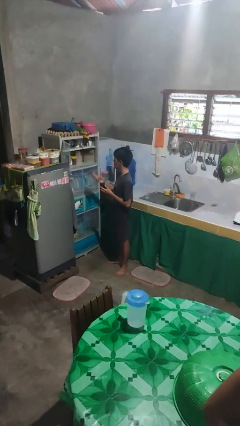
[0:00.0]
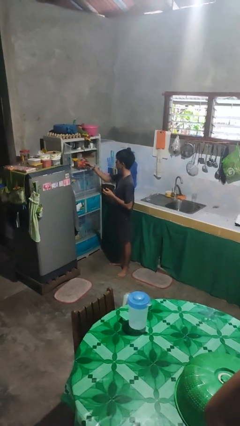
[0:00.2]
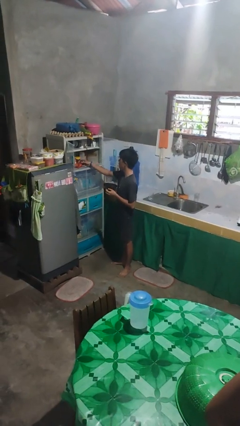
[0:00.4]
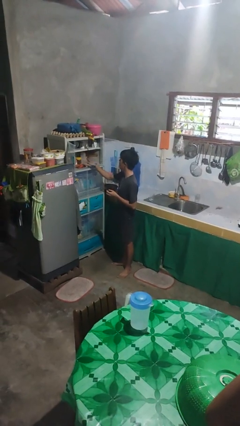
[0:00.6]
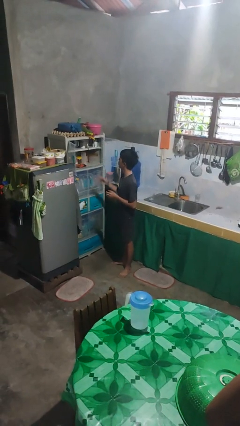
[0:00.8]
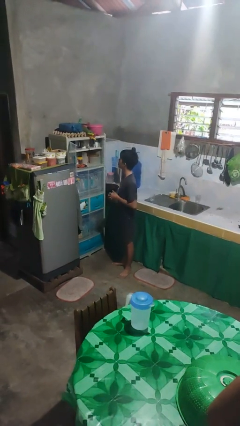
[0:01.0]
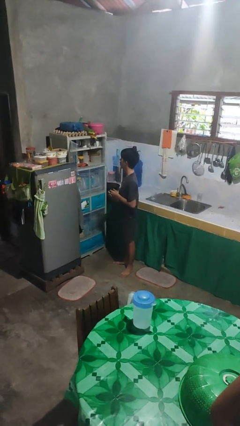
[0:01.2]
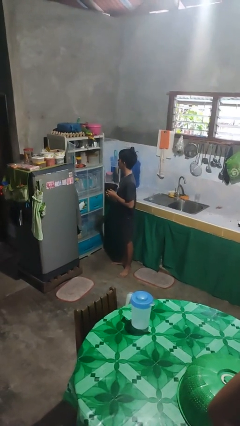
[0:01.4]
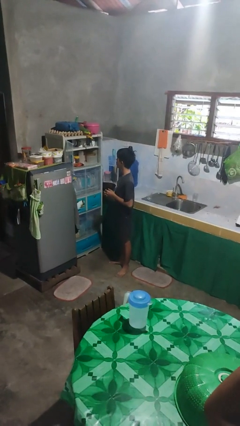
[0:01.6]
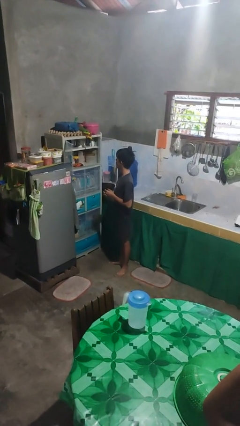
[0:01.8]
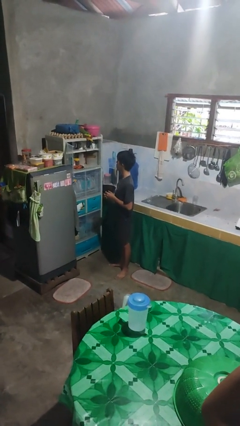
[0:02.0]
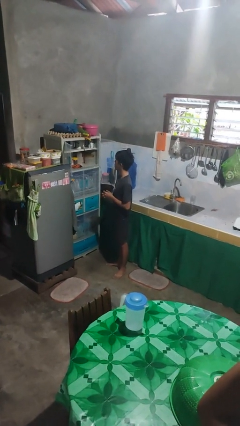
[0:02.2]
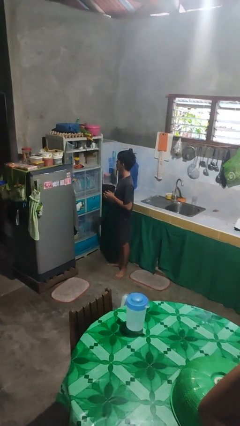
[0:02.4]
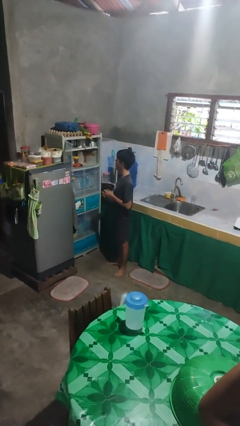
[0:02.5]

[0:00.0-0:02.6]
person puts object in cabinet

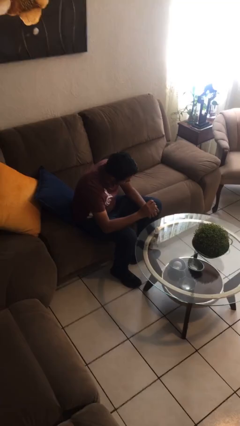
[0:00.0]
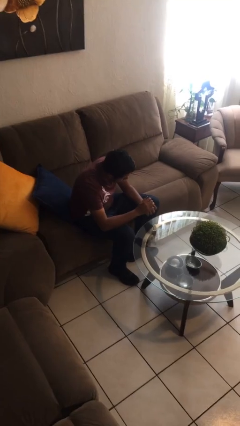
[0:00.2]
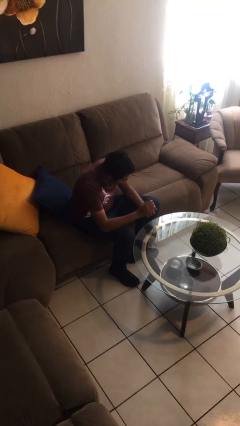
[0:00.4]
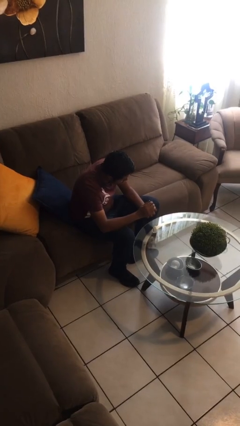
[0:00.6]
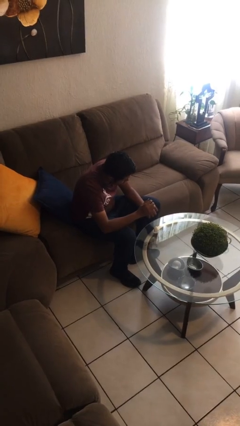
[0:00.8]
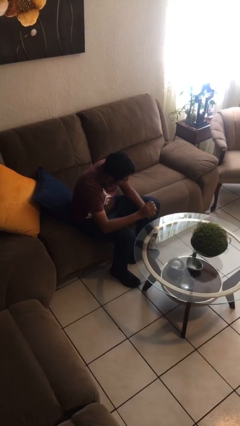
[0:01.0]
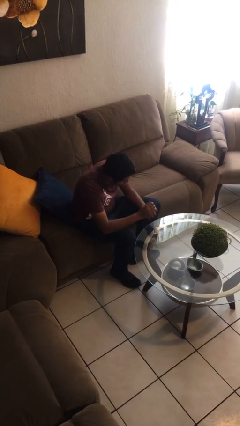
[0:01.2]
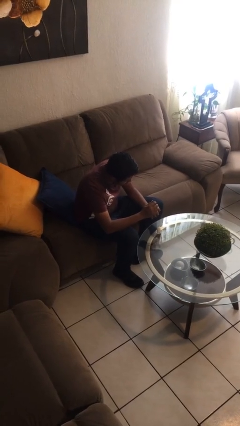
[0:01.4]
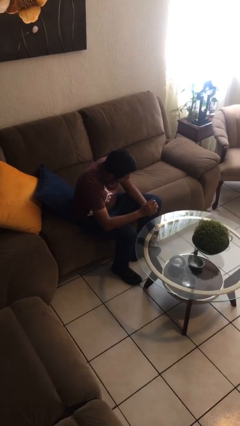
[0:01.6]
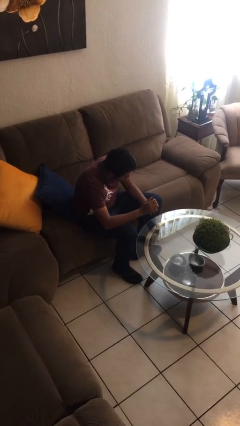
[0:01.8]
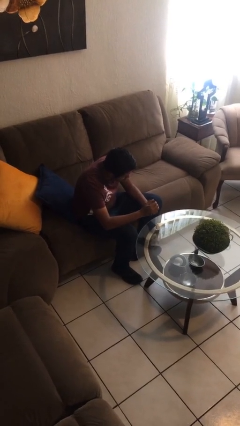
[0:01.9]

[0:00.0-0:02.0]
person paints fingernails

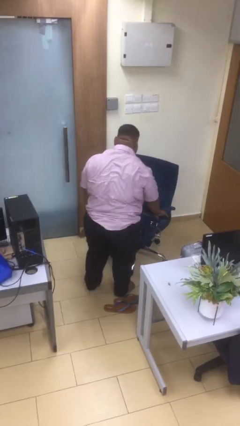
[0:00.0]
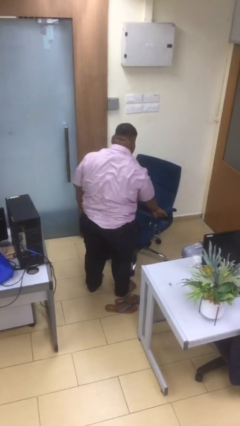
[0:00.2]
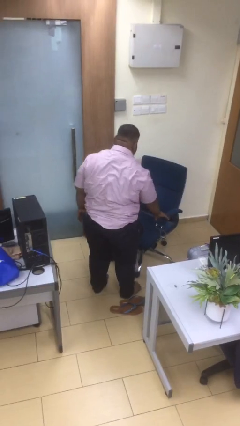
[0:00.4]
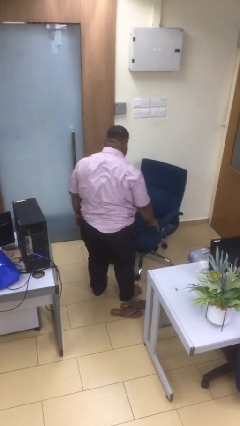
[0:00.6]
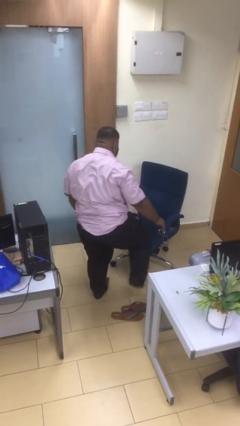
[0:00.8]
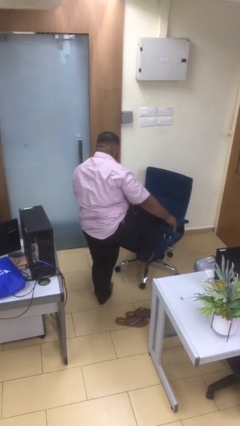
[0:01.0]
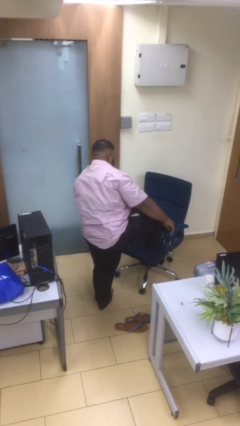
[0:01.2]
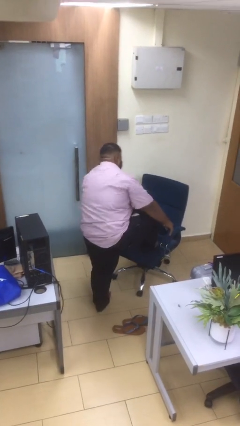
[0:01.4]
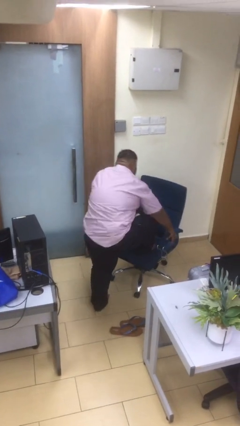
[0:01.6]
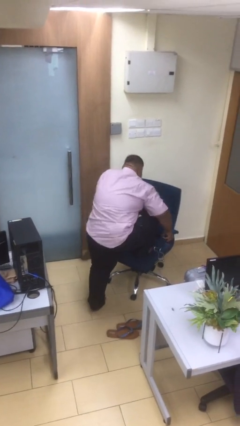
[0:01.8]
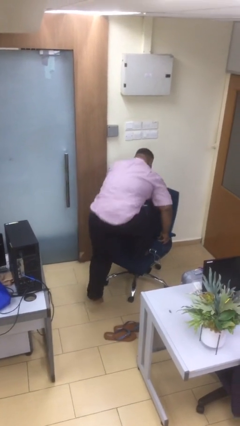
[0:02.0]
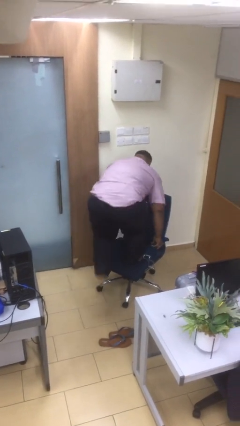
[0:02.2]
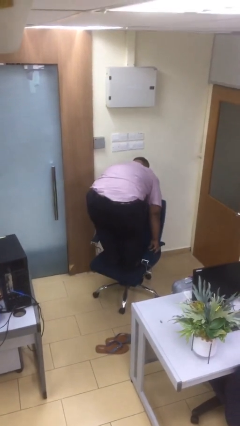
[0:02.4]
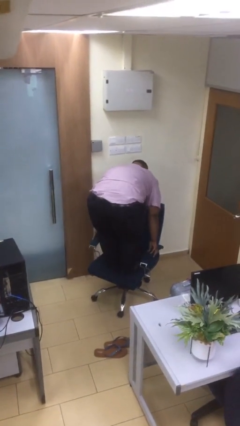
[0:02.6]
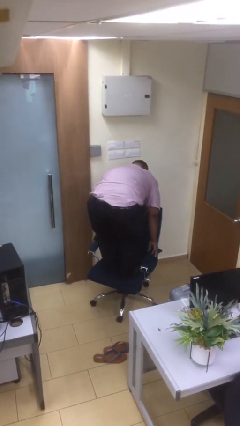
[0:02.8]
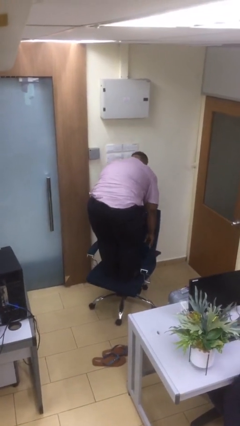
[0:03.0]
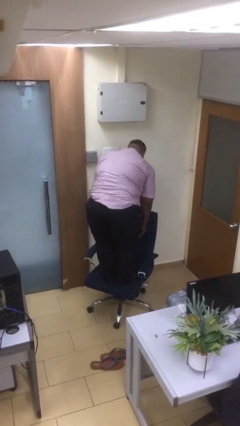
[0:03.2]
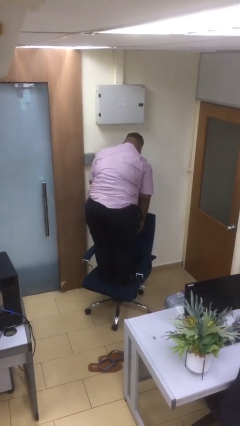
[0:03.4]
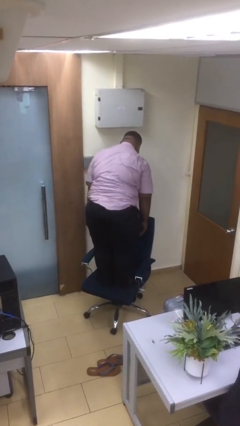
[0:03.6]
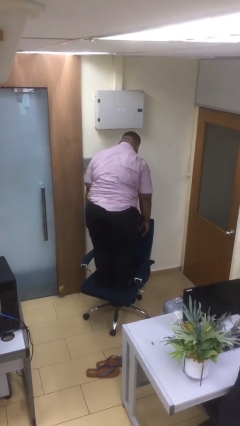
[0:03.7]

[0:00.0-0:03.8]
person climbs on chair

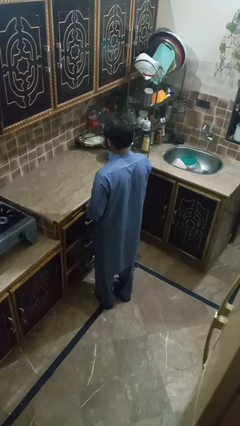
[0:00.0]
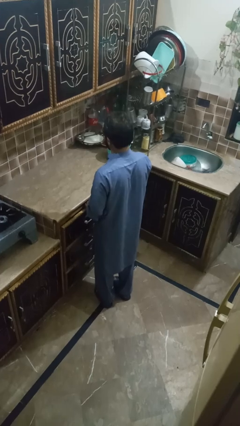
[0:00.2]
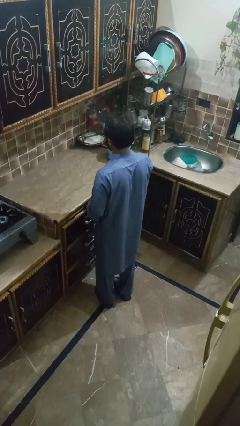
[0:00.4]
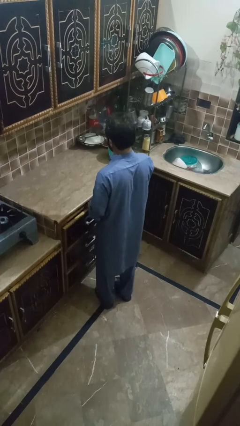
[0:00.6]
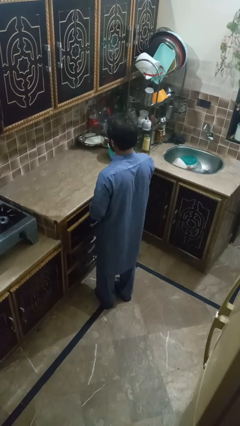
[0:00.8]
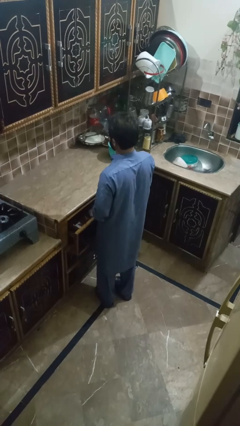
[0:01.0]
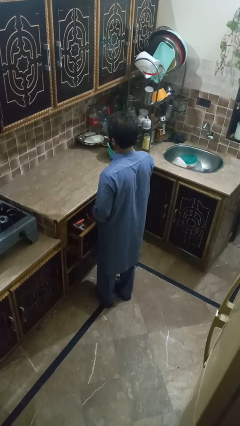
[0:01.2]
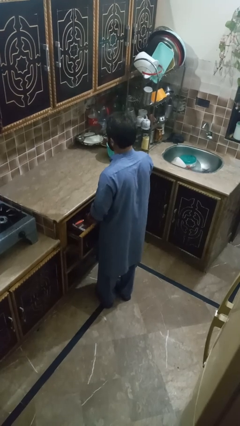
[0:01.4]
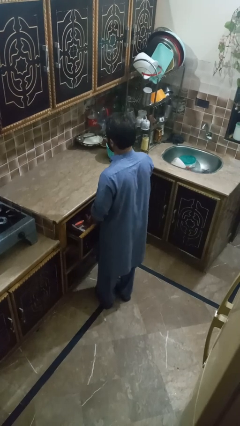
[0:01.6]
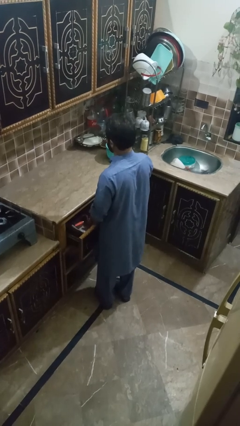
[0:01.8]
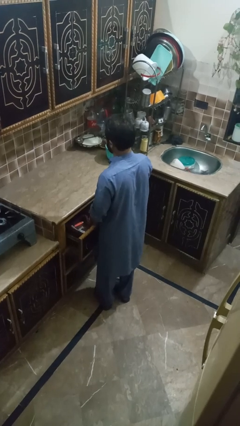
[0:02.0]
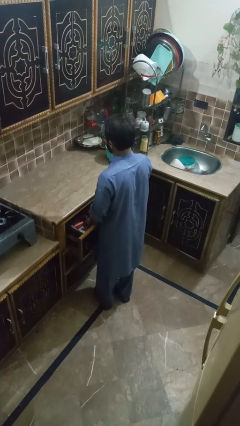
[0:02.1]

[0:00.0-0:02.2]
person searches in kitchen drawer

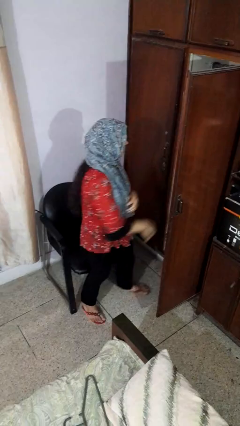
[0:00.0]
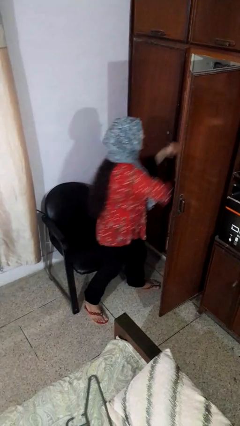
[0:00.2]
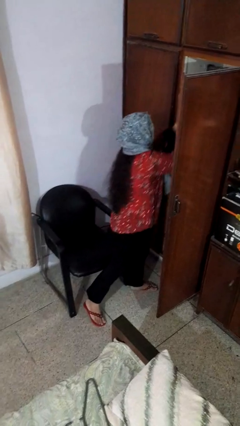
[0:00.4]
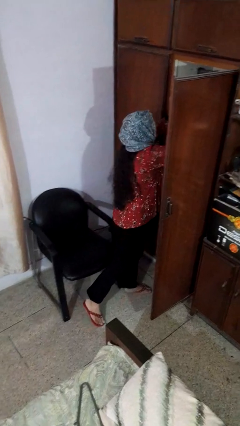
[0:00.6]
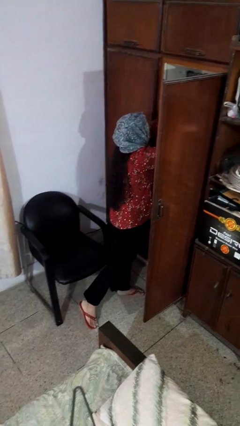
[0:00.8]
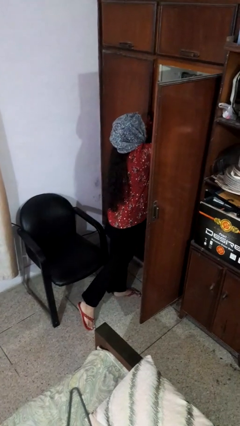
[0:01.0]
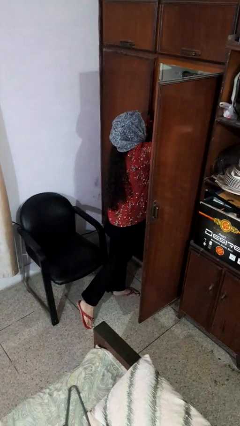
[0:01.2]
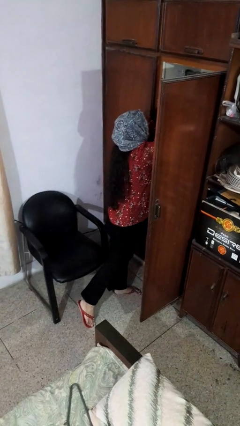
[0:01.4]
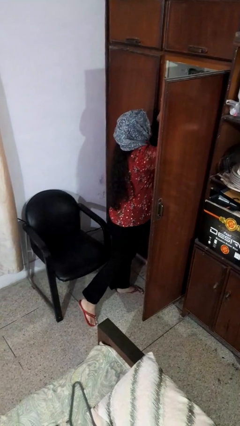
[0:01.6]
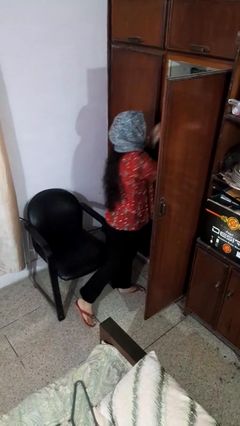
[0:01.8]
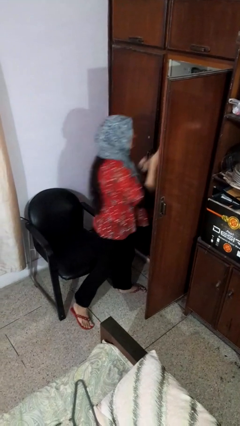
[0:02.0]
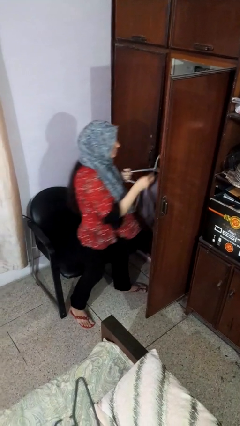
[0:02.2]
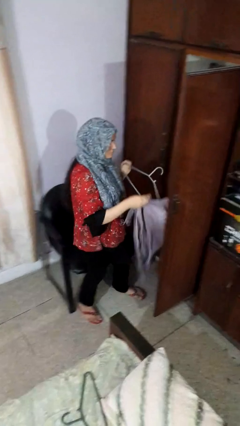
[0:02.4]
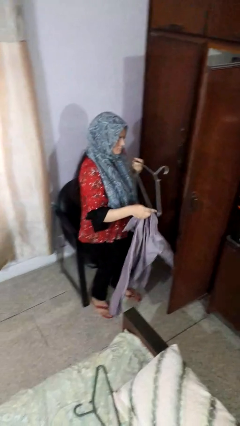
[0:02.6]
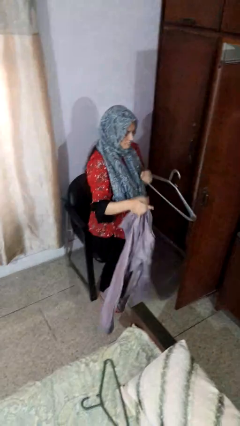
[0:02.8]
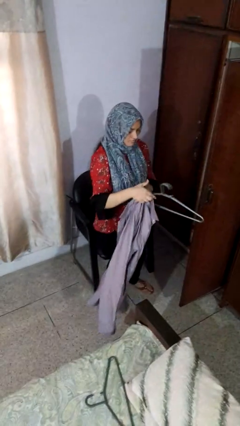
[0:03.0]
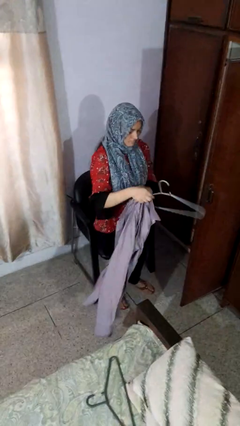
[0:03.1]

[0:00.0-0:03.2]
person takes clothes from closet

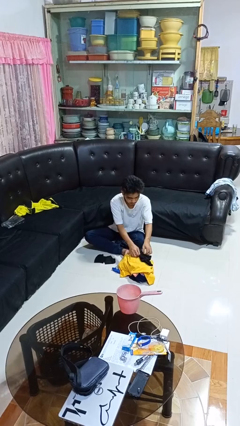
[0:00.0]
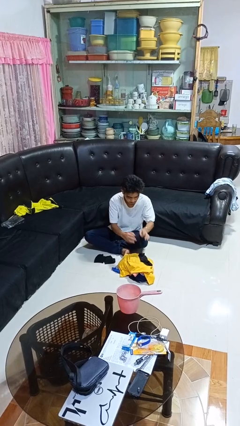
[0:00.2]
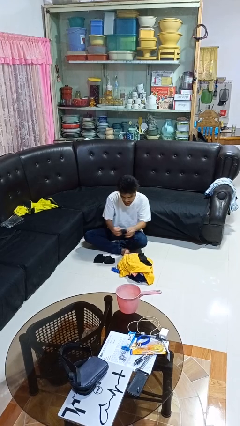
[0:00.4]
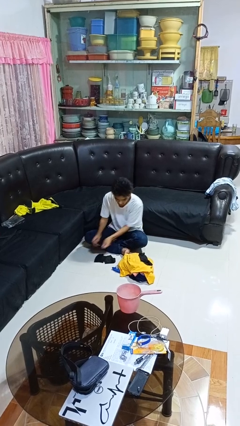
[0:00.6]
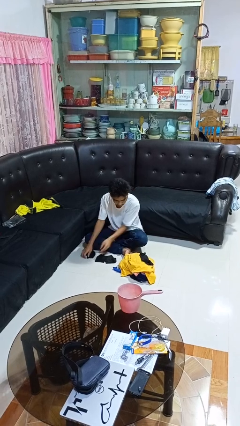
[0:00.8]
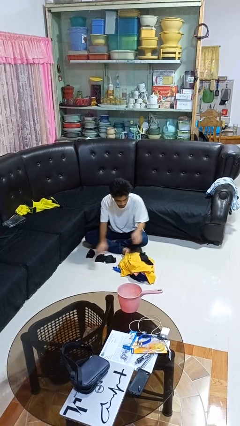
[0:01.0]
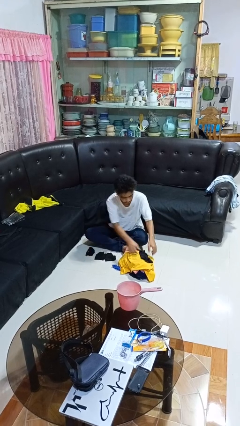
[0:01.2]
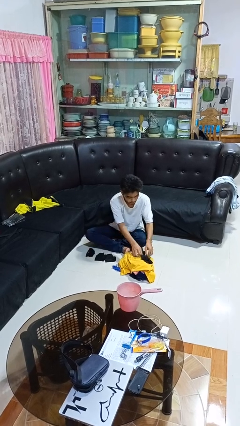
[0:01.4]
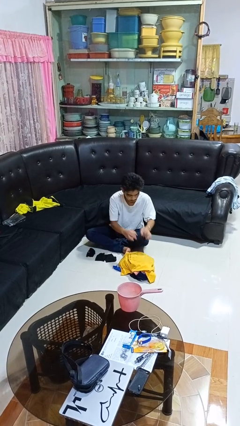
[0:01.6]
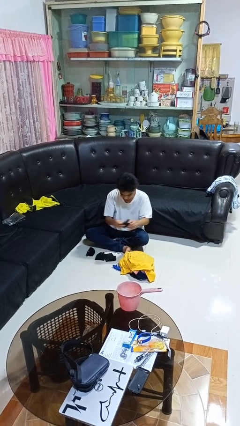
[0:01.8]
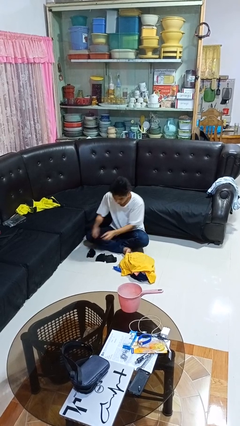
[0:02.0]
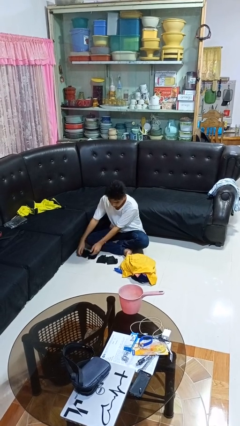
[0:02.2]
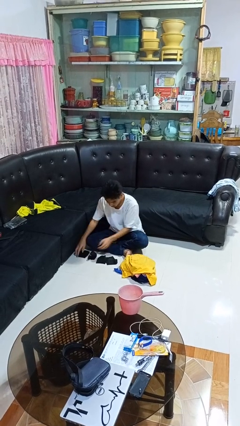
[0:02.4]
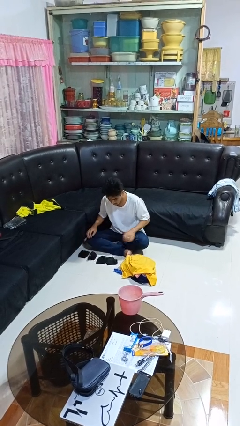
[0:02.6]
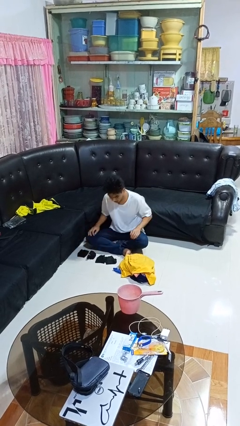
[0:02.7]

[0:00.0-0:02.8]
person folds socks

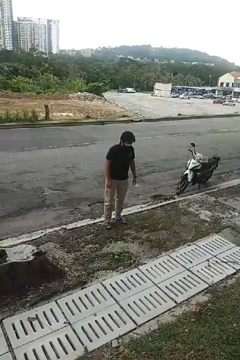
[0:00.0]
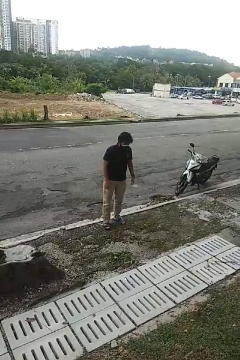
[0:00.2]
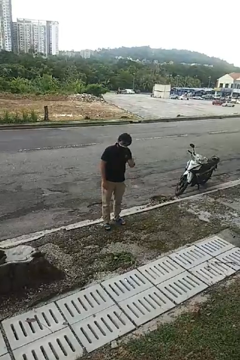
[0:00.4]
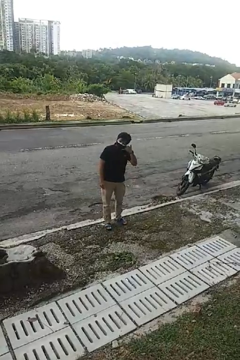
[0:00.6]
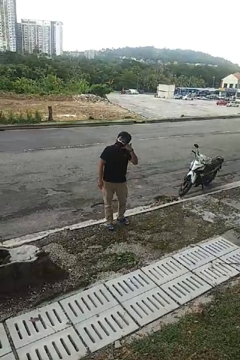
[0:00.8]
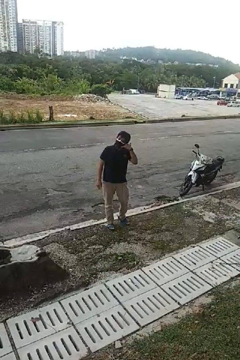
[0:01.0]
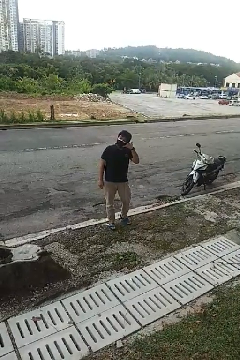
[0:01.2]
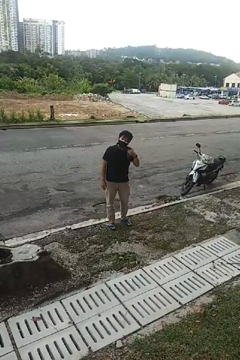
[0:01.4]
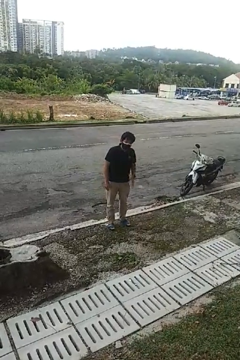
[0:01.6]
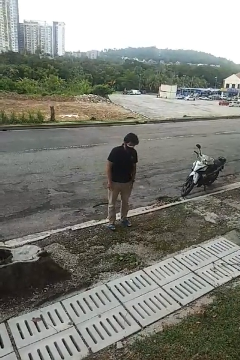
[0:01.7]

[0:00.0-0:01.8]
person gestures call me
